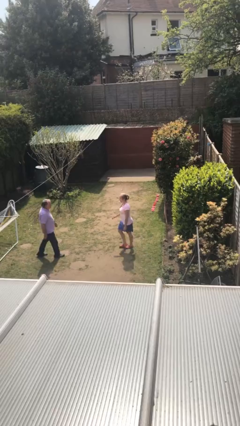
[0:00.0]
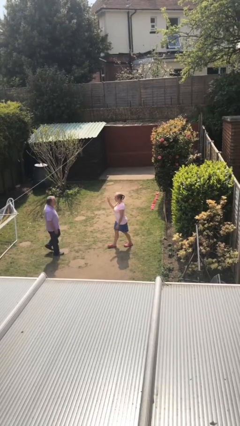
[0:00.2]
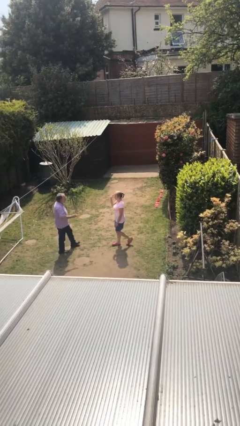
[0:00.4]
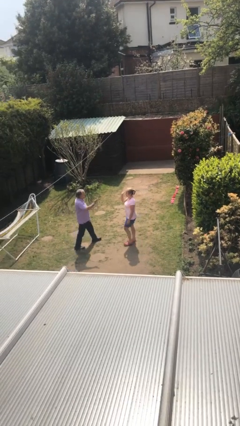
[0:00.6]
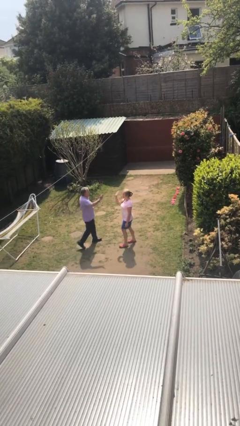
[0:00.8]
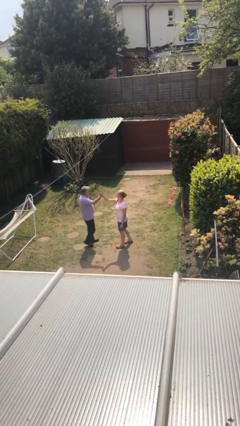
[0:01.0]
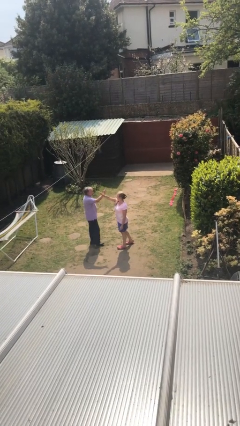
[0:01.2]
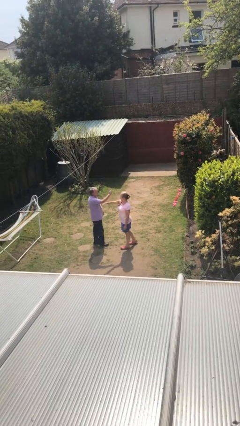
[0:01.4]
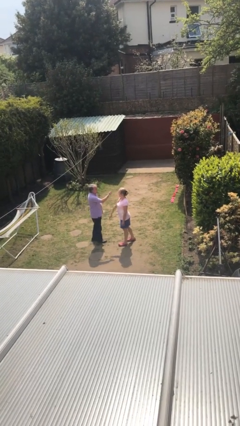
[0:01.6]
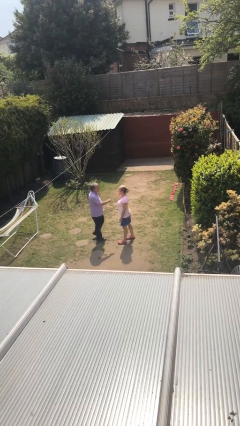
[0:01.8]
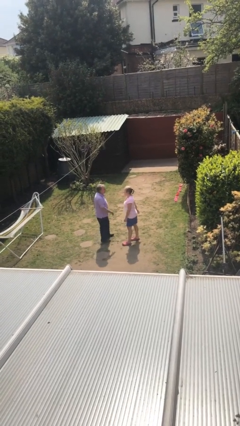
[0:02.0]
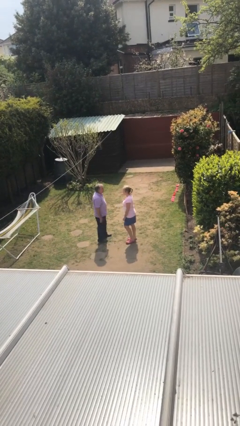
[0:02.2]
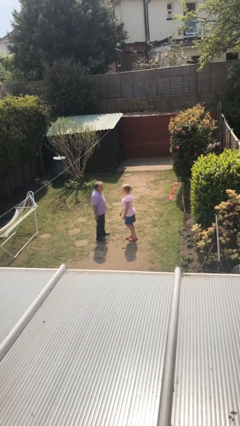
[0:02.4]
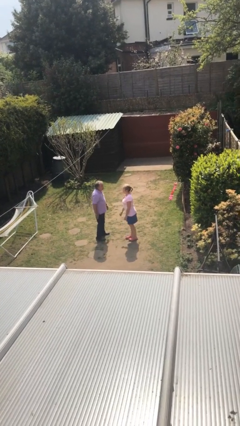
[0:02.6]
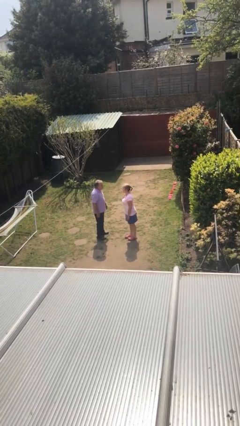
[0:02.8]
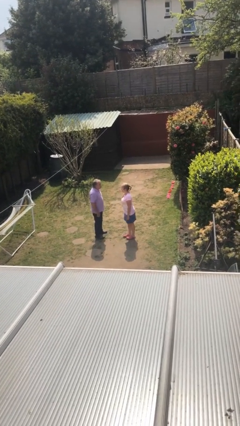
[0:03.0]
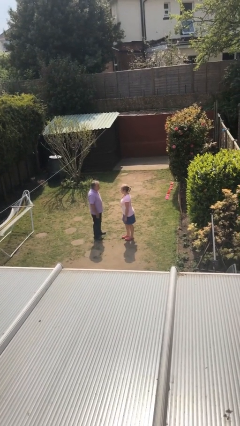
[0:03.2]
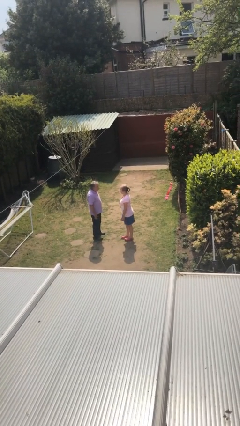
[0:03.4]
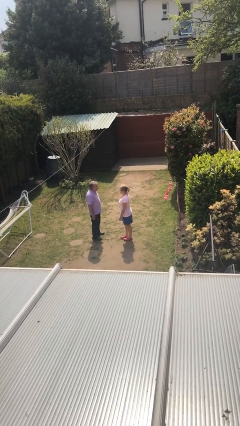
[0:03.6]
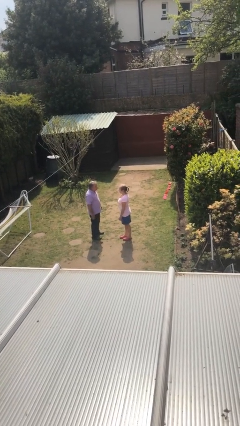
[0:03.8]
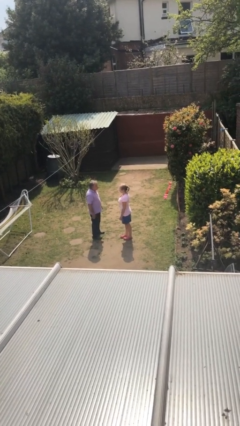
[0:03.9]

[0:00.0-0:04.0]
person highfives hand

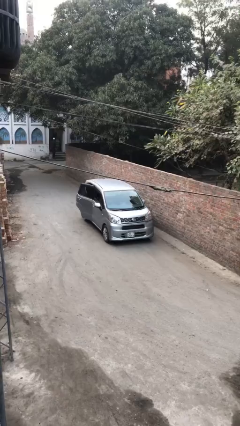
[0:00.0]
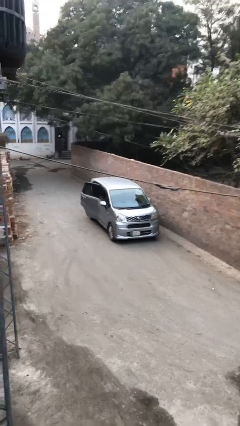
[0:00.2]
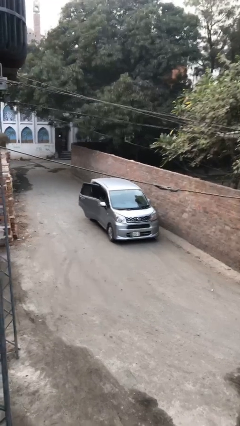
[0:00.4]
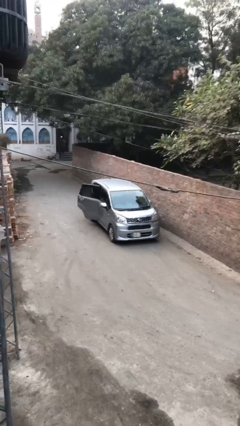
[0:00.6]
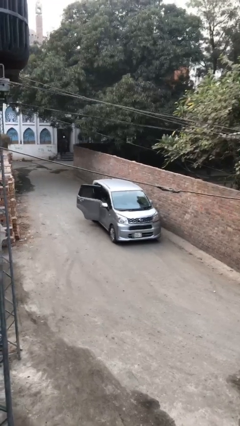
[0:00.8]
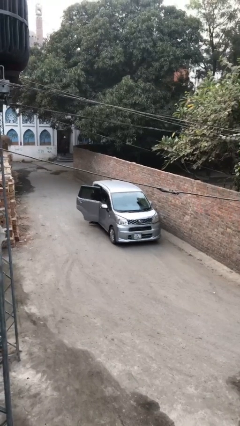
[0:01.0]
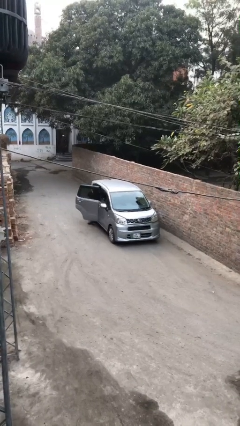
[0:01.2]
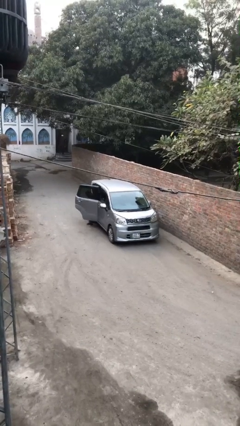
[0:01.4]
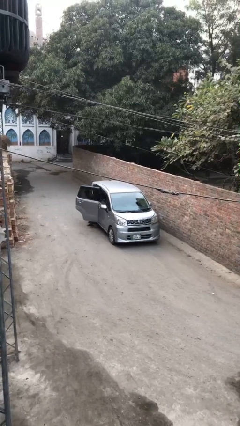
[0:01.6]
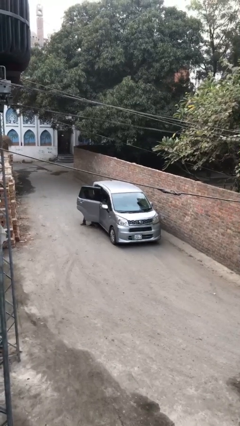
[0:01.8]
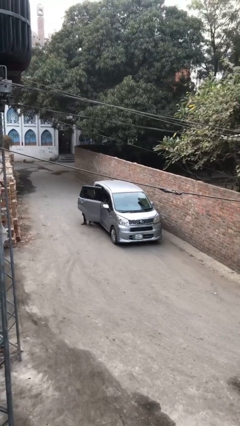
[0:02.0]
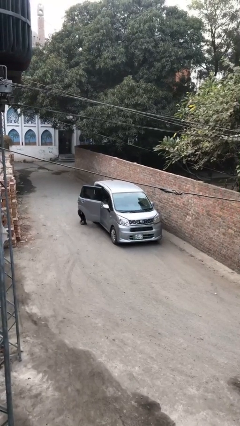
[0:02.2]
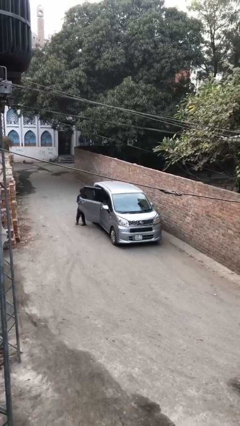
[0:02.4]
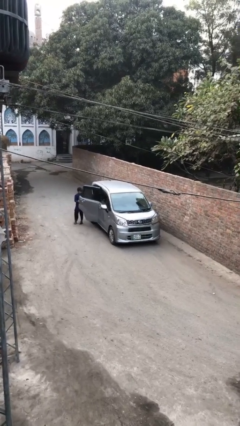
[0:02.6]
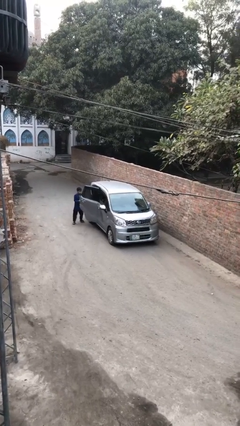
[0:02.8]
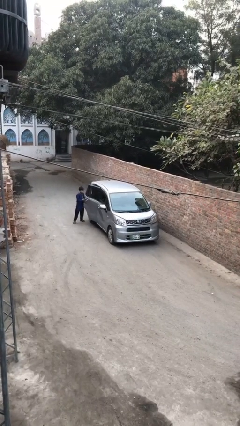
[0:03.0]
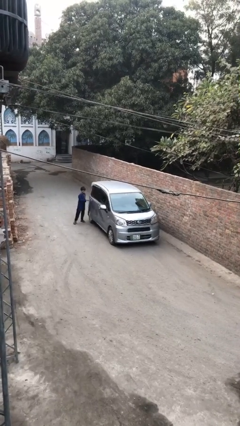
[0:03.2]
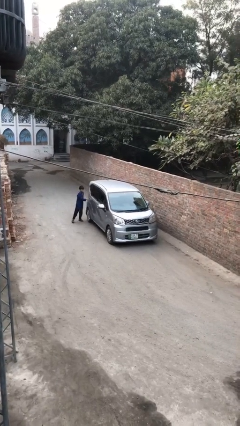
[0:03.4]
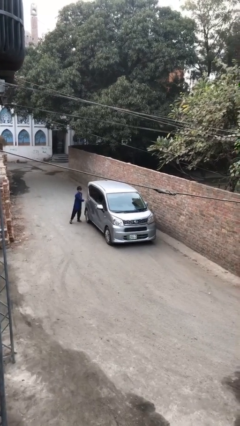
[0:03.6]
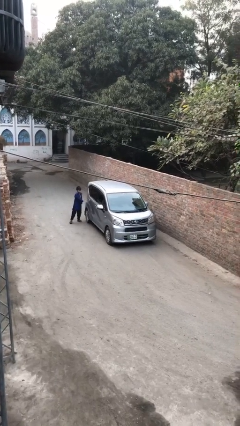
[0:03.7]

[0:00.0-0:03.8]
car drops off person

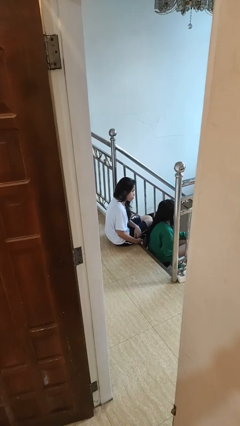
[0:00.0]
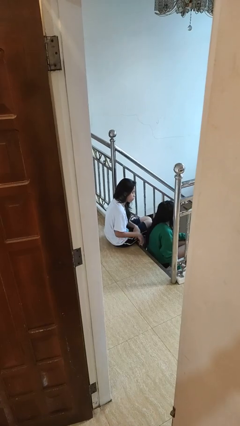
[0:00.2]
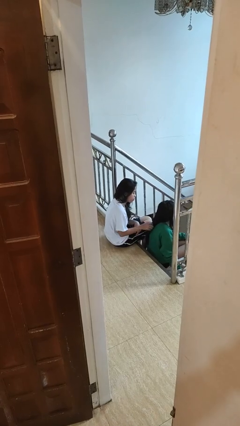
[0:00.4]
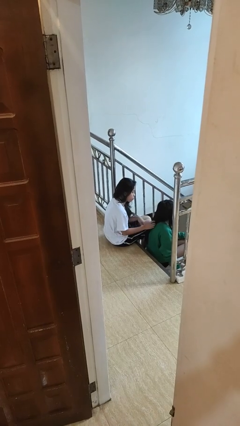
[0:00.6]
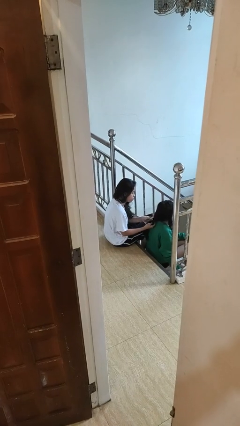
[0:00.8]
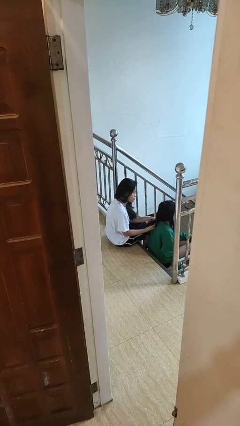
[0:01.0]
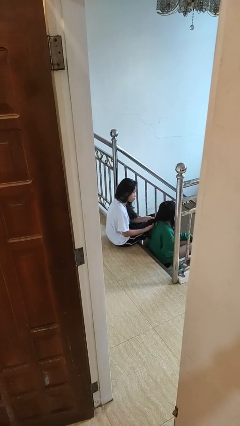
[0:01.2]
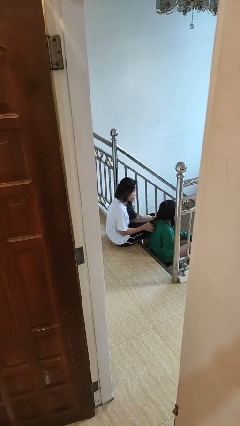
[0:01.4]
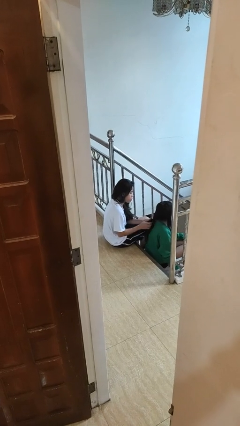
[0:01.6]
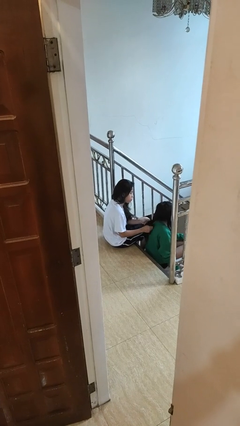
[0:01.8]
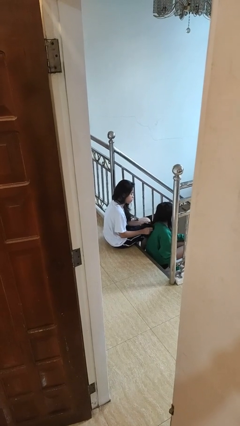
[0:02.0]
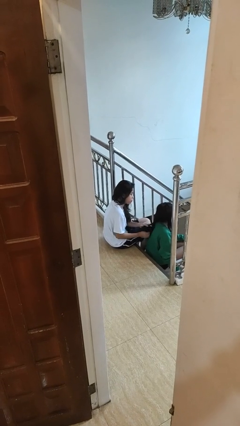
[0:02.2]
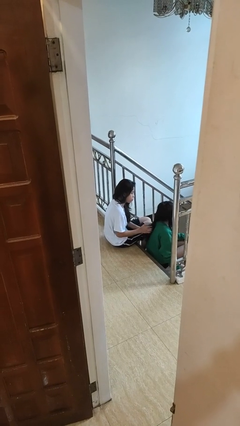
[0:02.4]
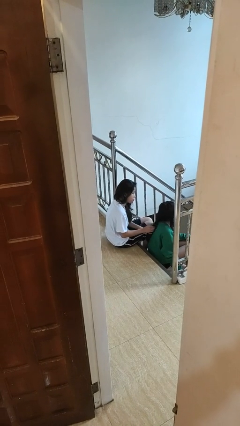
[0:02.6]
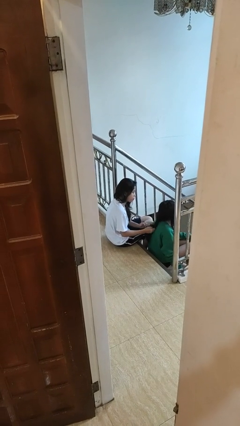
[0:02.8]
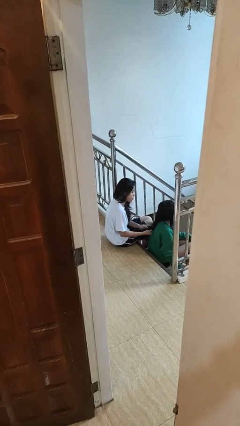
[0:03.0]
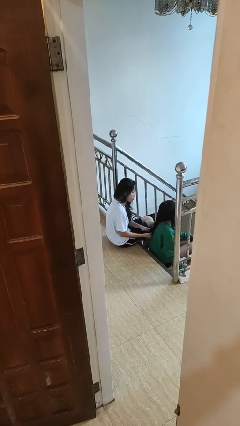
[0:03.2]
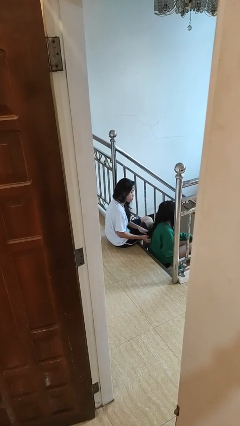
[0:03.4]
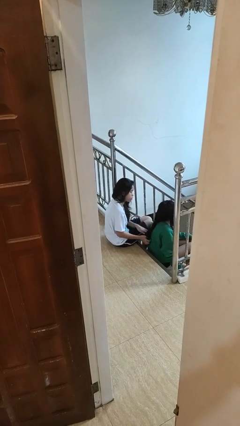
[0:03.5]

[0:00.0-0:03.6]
person braids hair of person

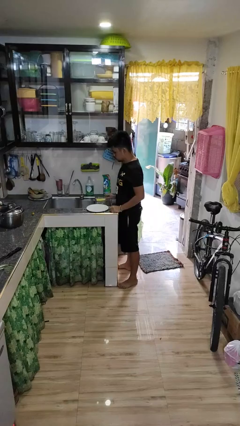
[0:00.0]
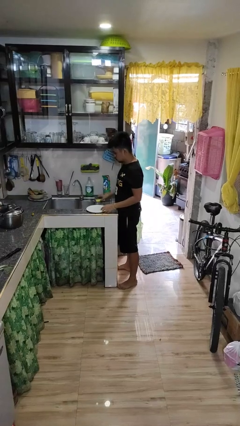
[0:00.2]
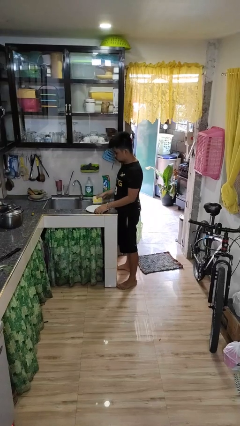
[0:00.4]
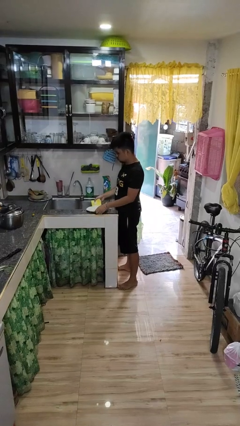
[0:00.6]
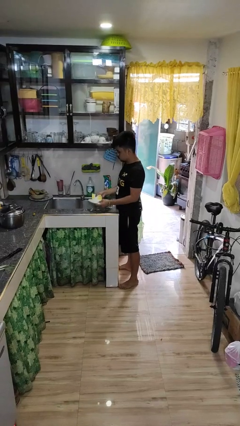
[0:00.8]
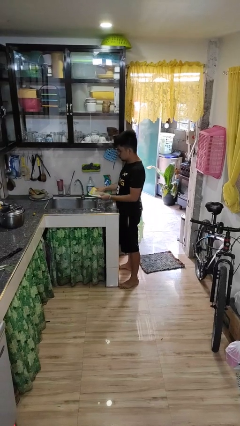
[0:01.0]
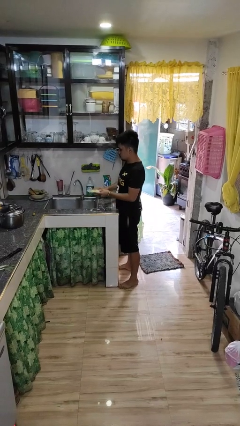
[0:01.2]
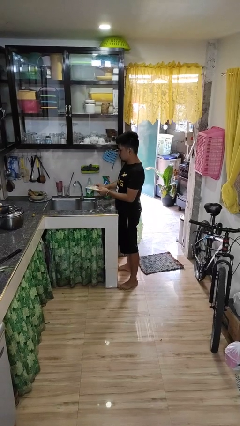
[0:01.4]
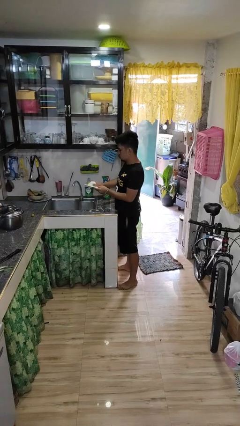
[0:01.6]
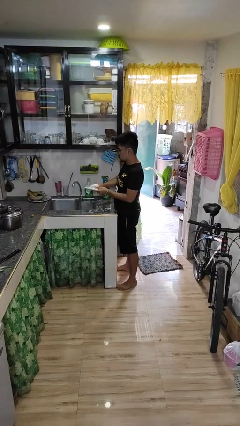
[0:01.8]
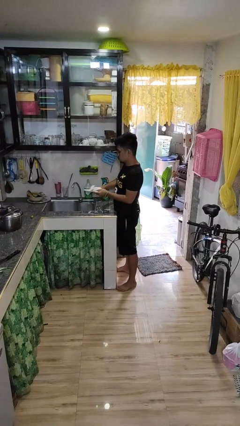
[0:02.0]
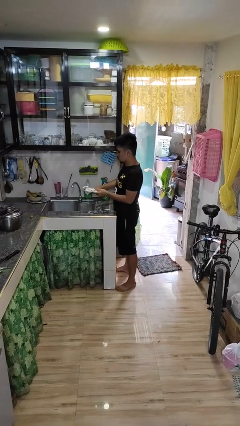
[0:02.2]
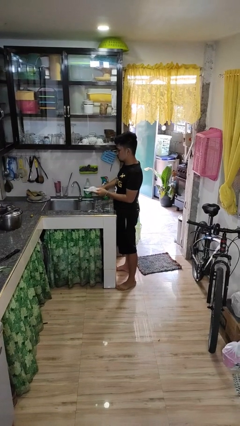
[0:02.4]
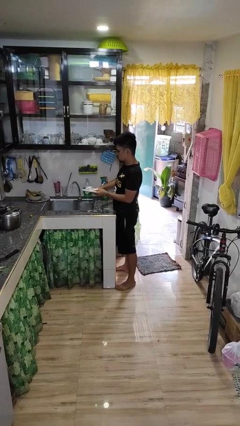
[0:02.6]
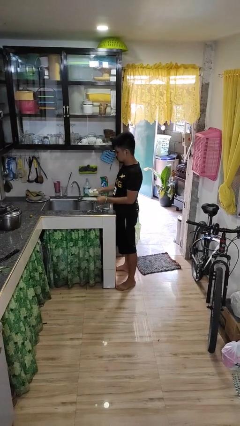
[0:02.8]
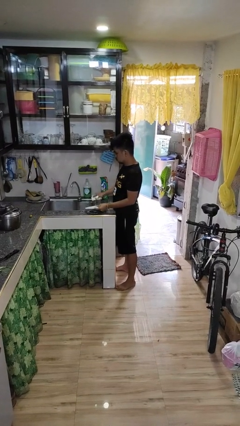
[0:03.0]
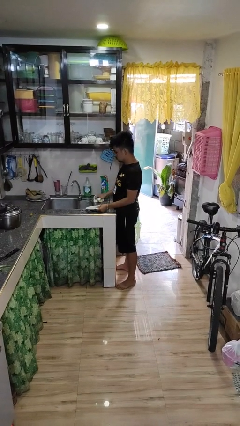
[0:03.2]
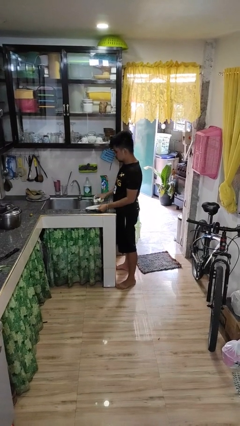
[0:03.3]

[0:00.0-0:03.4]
person washes dish

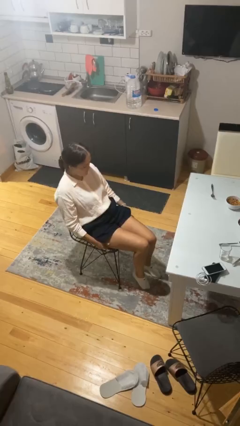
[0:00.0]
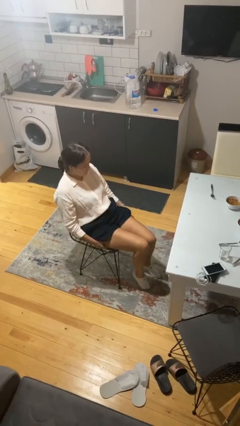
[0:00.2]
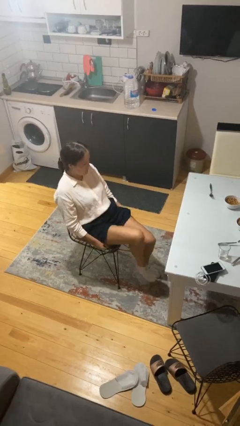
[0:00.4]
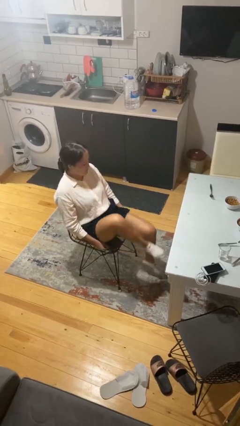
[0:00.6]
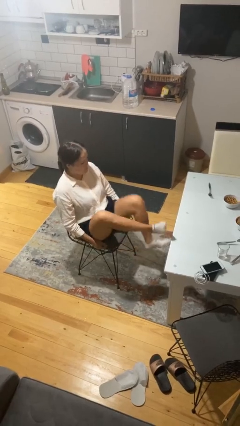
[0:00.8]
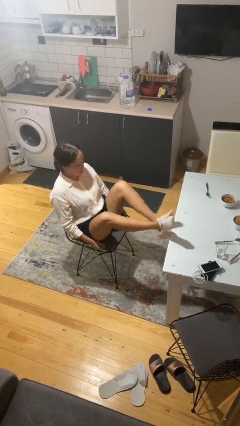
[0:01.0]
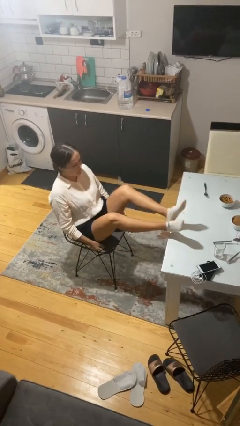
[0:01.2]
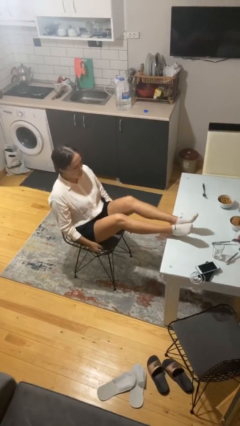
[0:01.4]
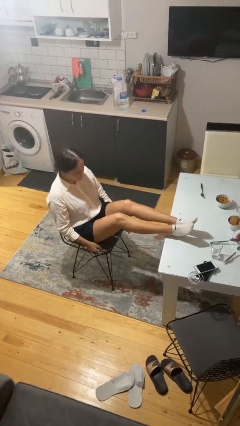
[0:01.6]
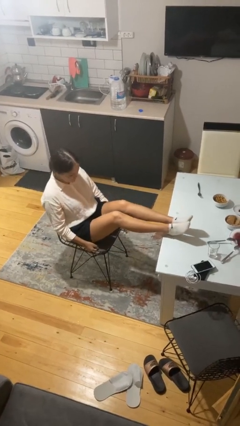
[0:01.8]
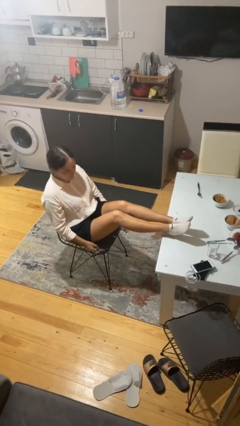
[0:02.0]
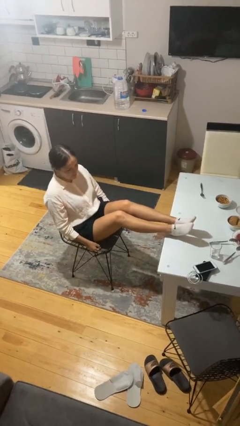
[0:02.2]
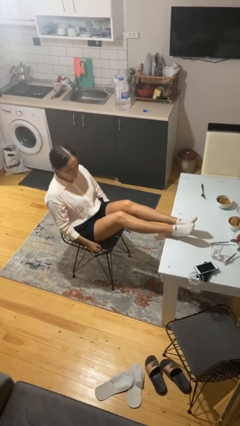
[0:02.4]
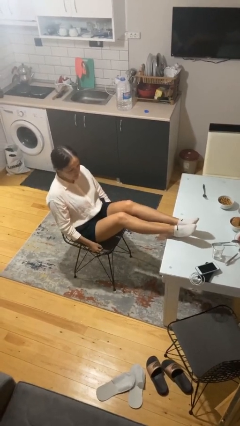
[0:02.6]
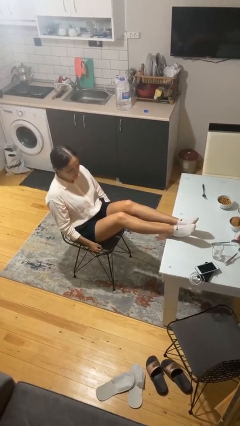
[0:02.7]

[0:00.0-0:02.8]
person puts feet up
